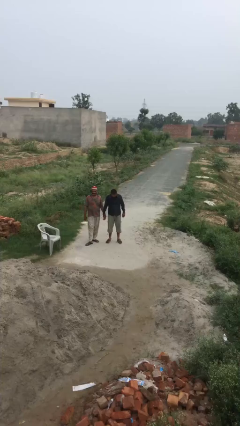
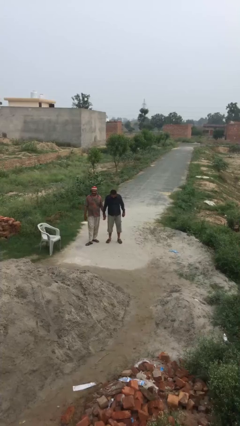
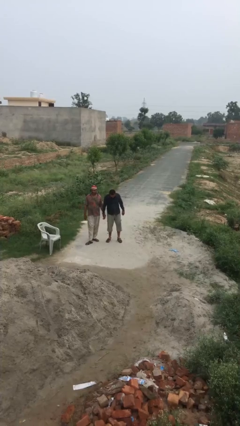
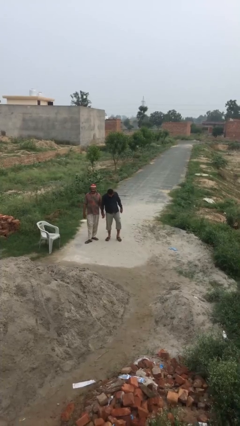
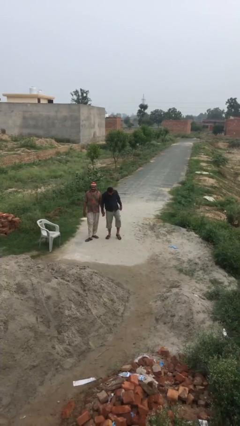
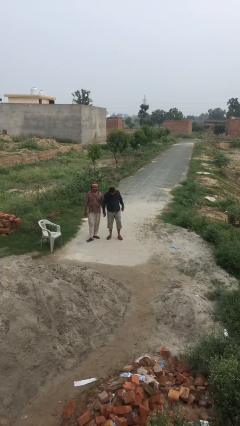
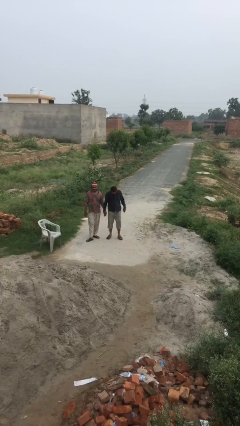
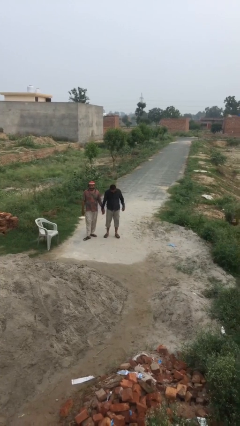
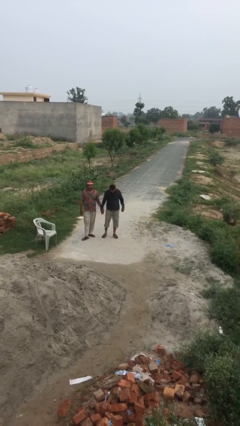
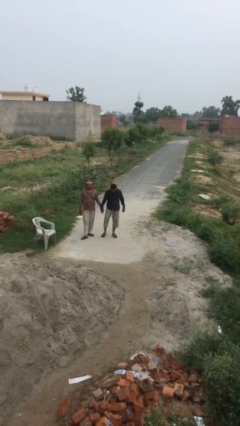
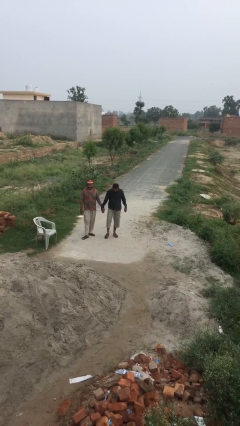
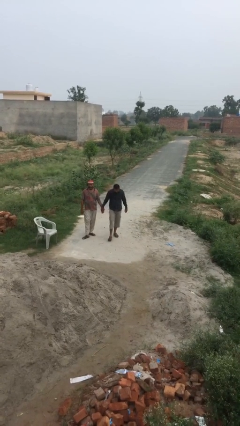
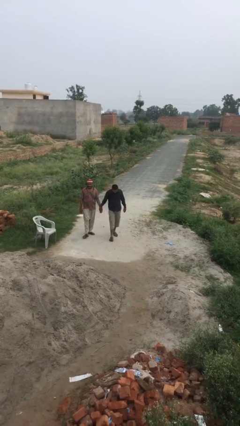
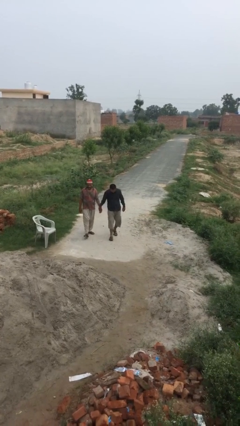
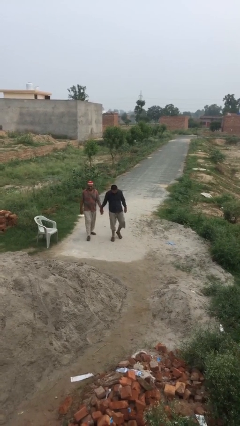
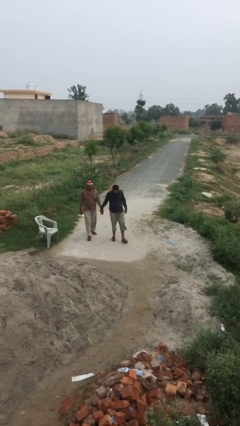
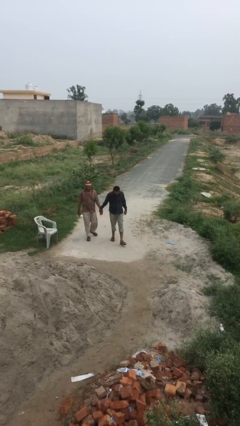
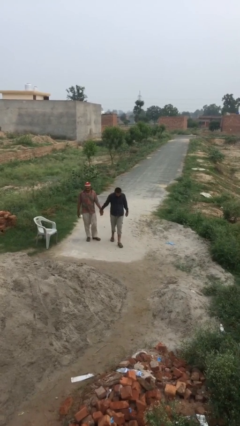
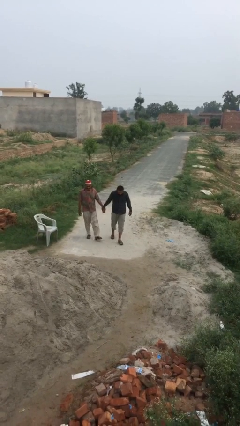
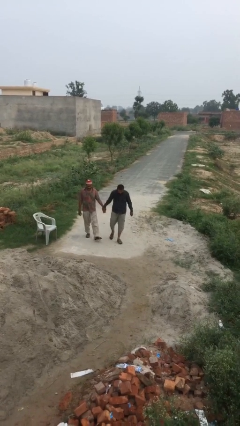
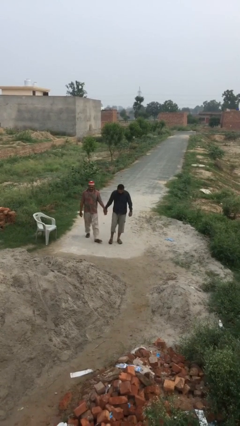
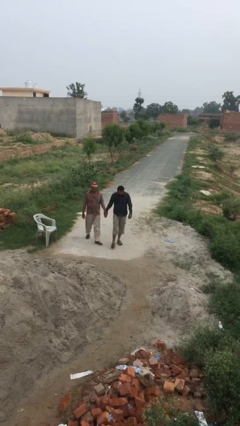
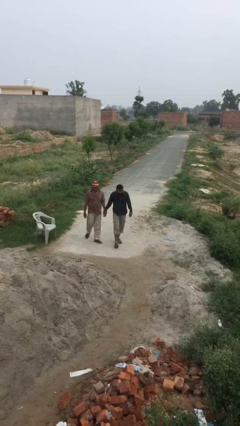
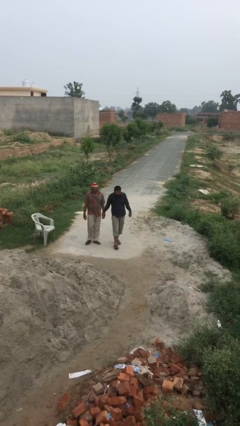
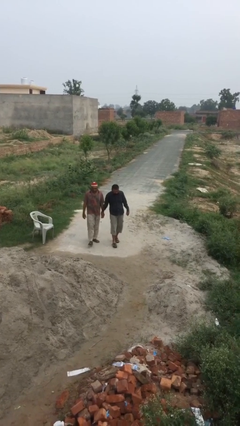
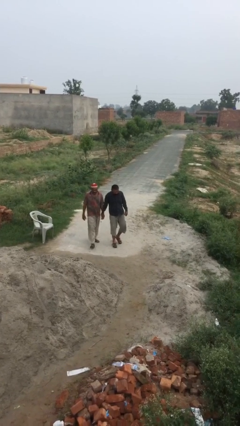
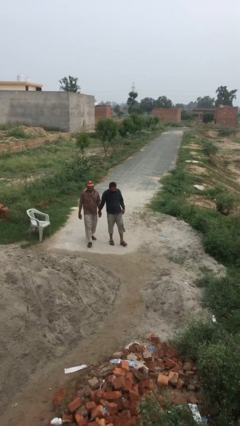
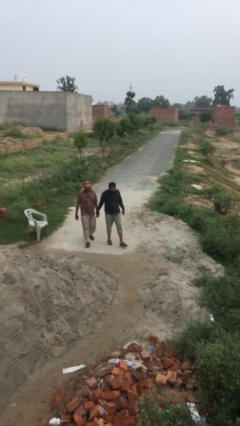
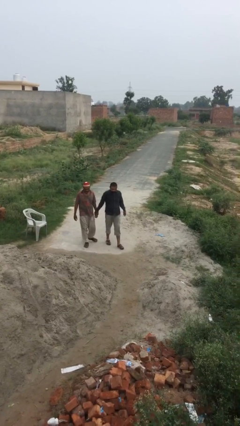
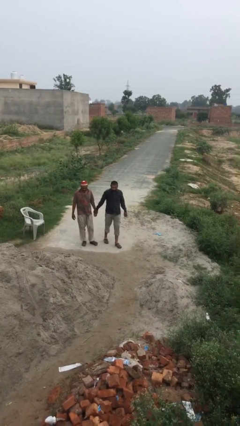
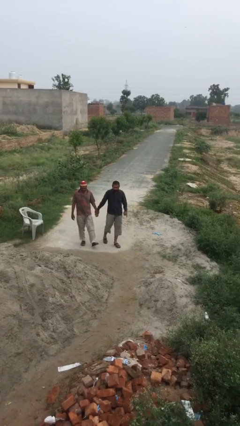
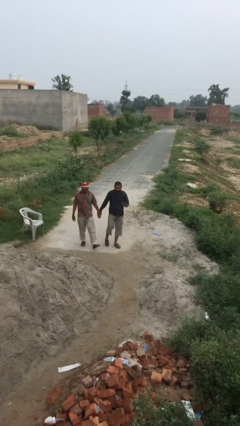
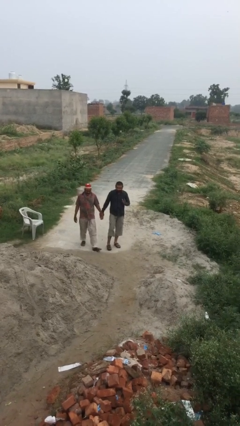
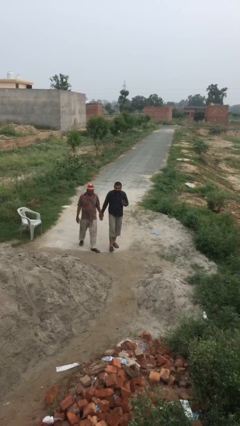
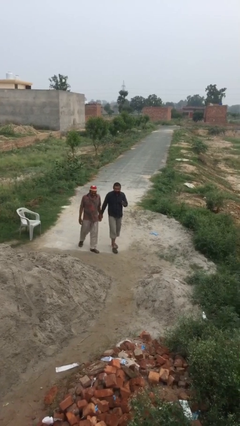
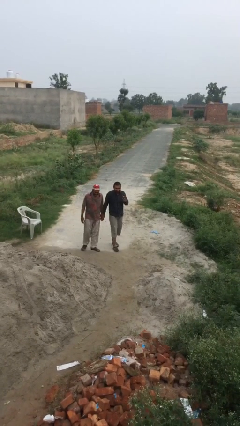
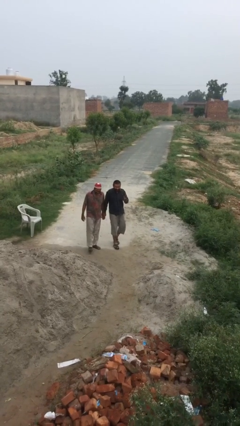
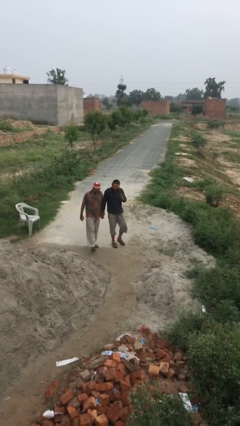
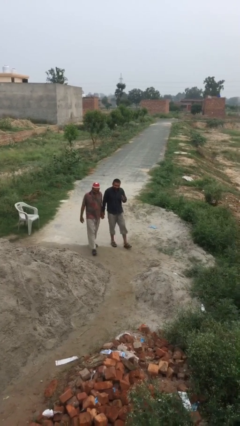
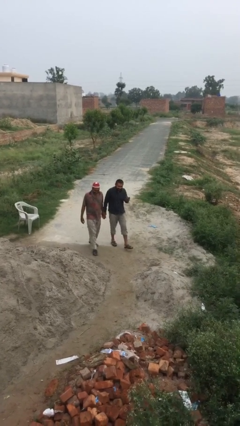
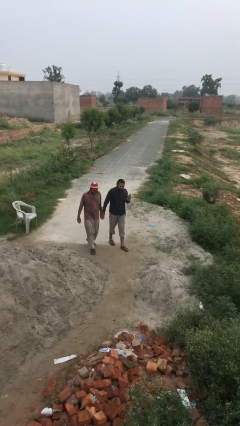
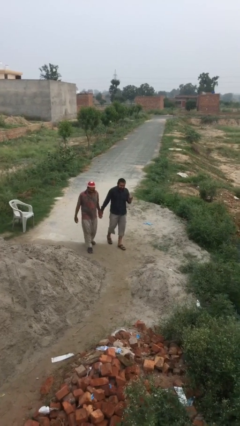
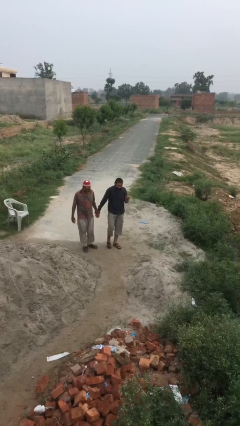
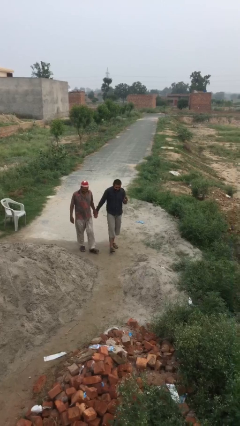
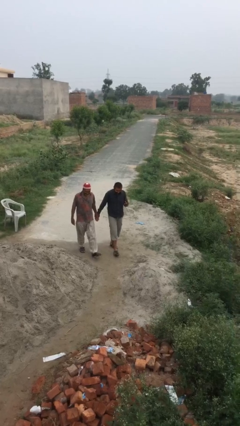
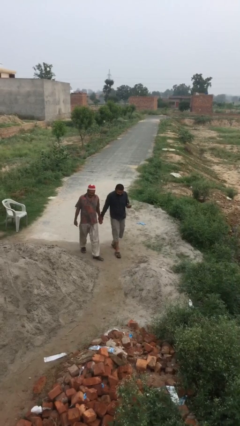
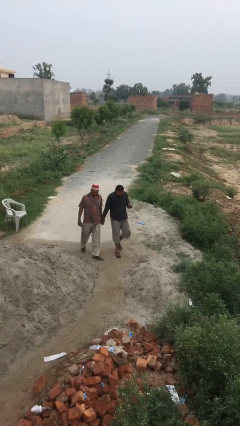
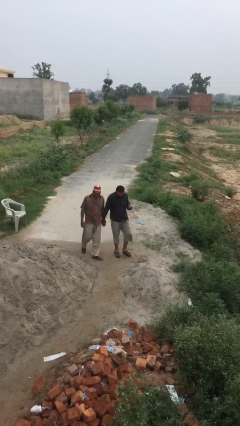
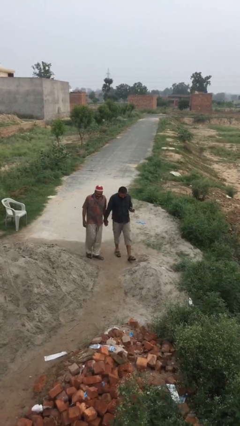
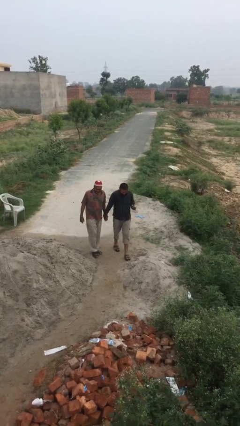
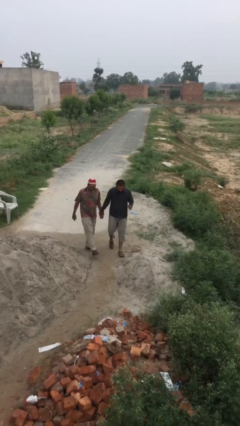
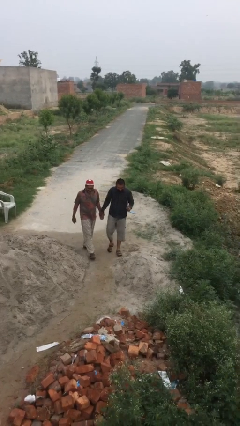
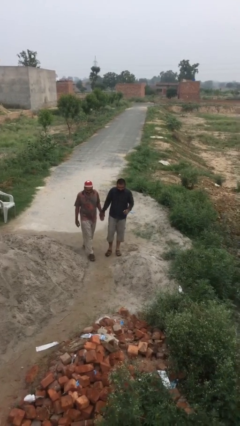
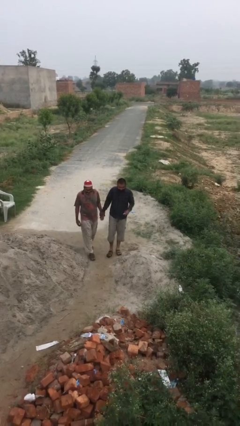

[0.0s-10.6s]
person holds hand

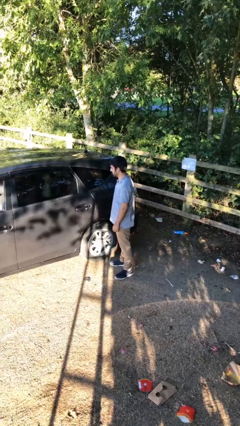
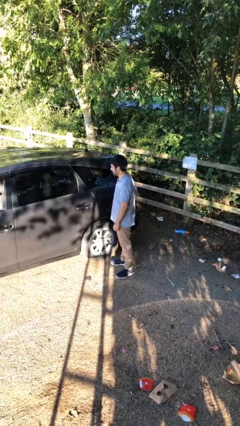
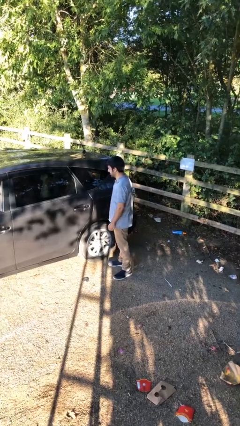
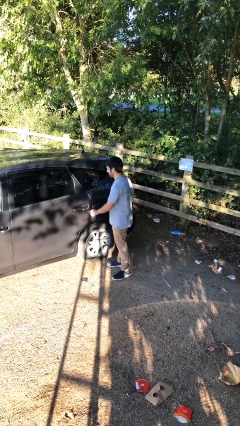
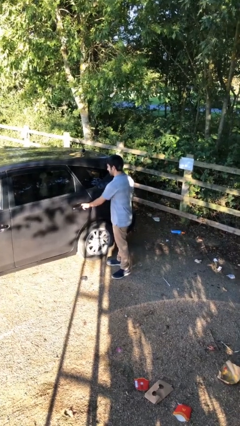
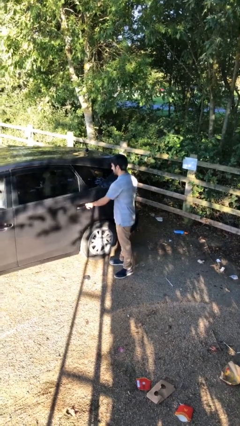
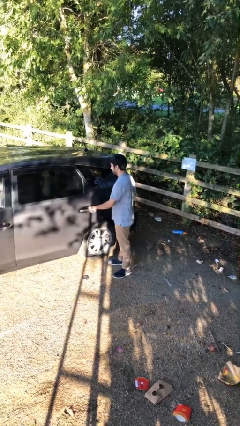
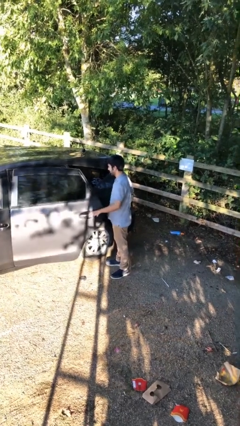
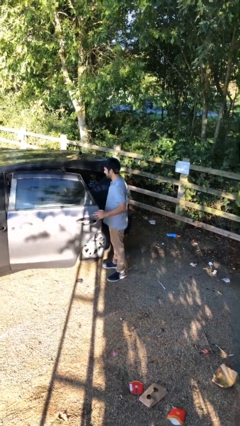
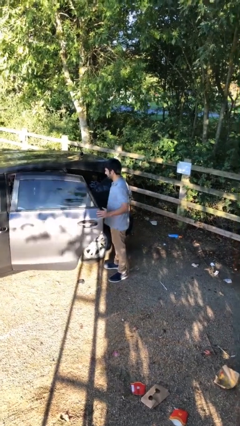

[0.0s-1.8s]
person opens car door

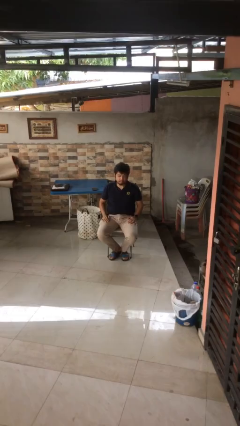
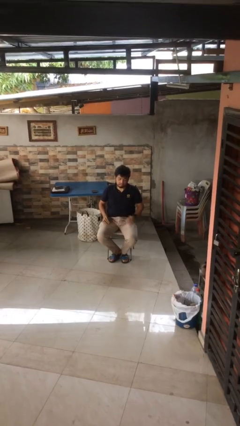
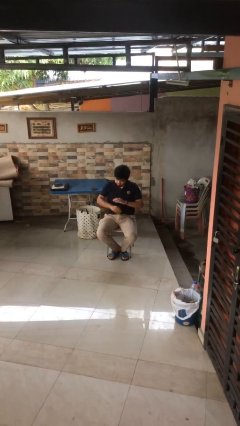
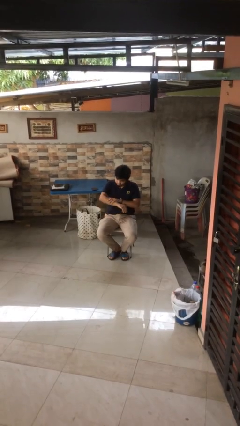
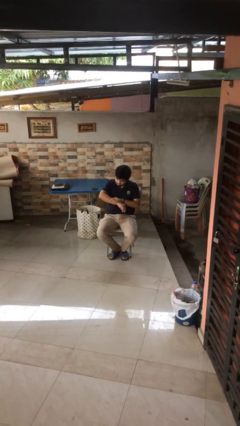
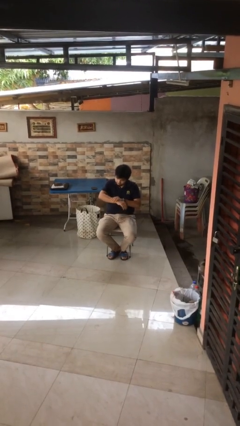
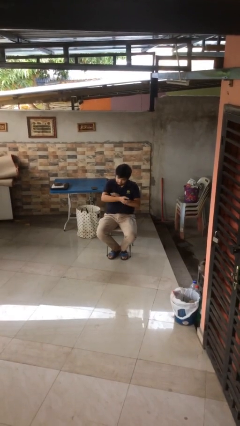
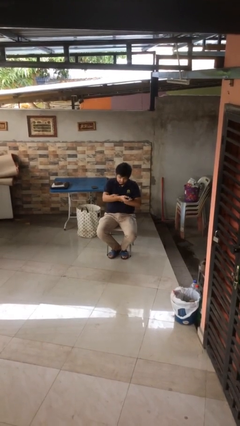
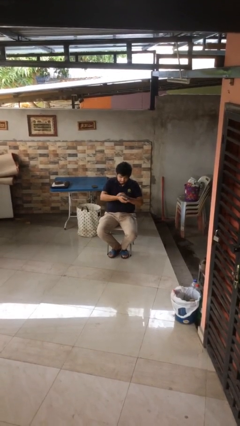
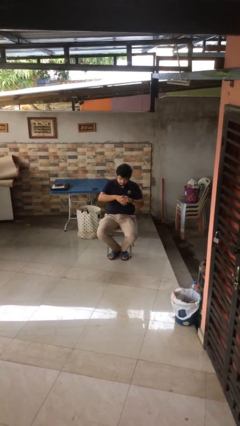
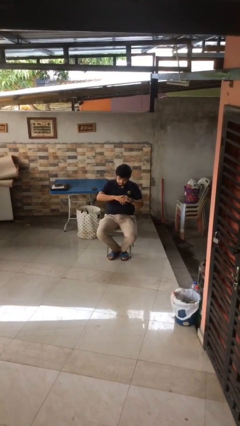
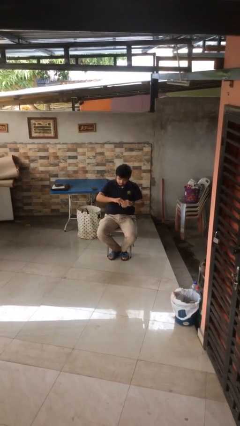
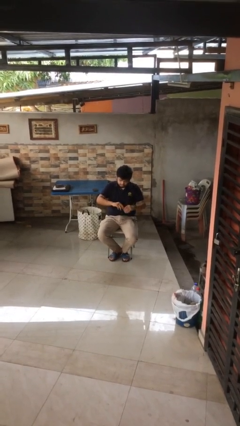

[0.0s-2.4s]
person looks at hands in lap

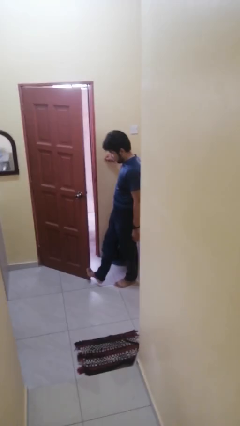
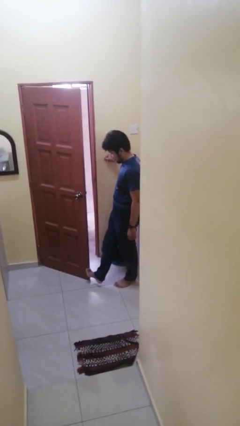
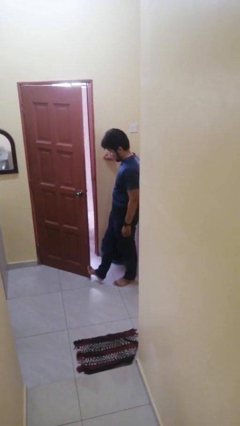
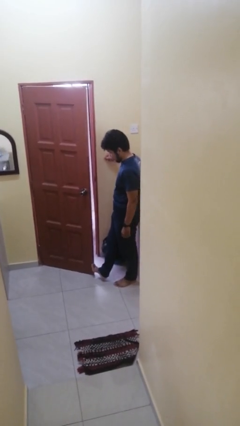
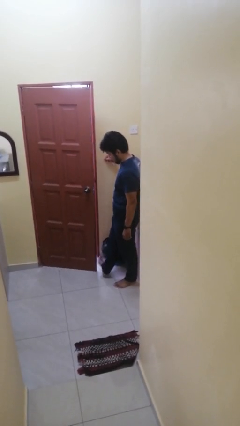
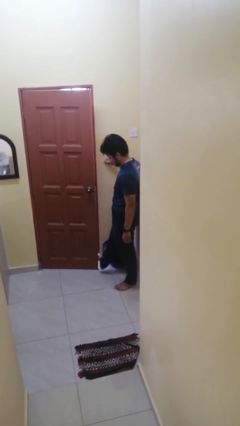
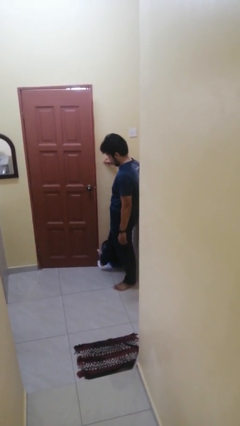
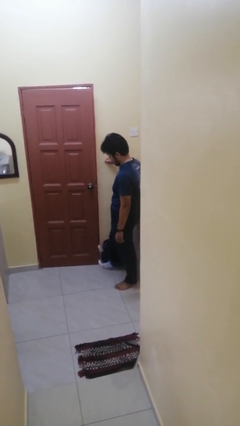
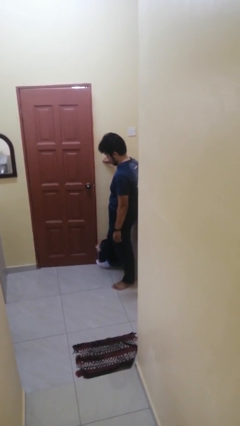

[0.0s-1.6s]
person closes door with foot

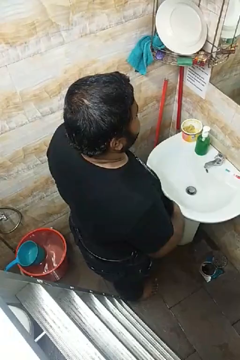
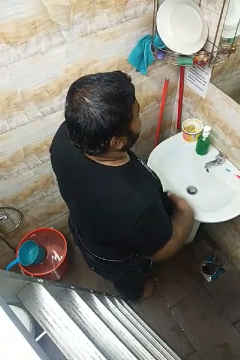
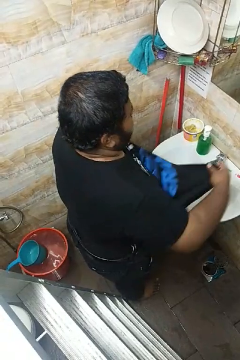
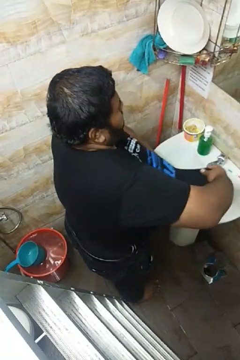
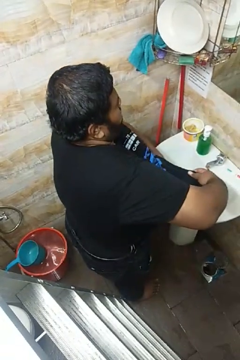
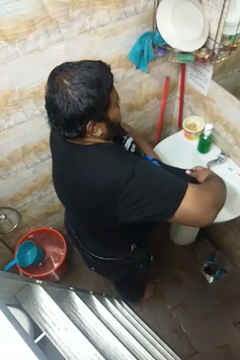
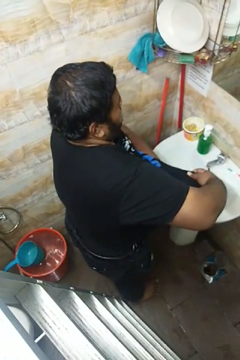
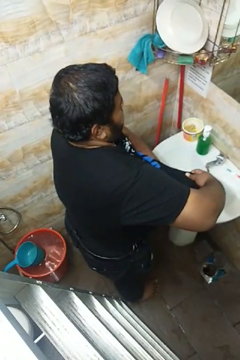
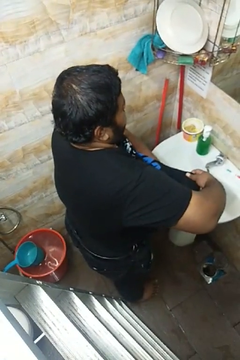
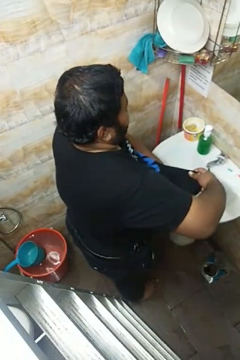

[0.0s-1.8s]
person applies deodorant
